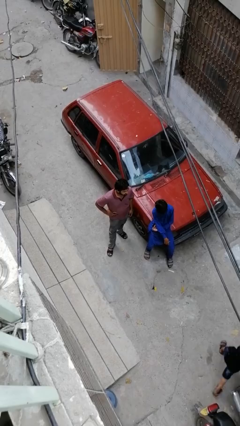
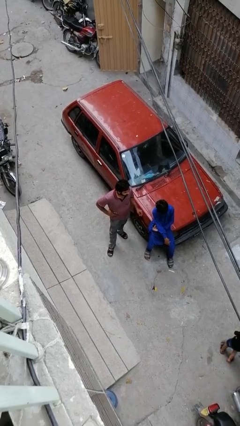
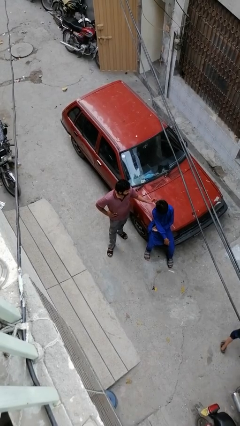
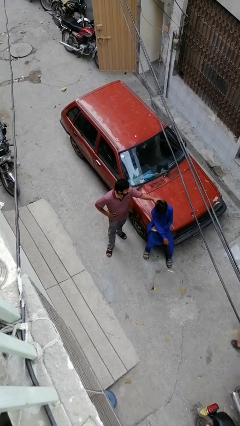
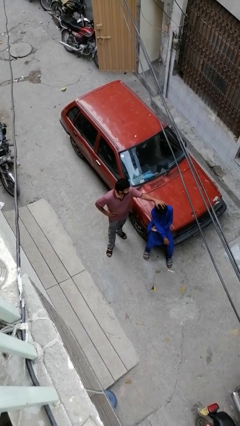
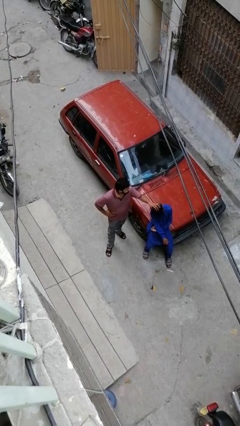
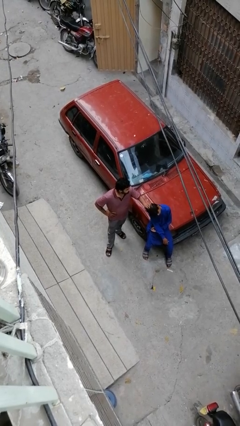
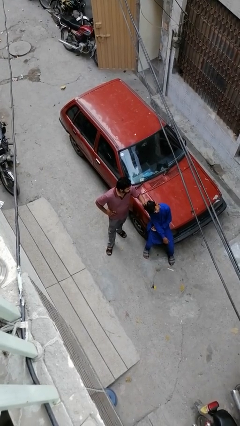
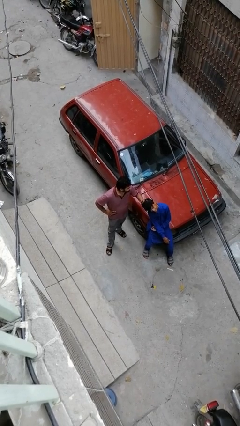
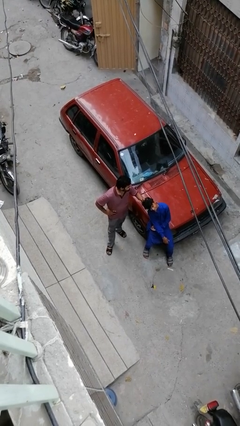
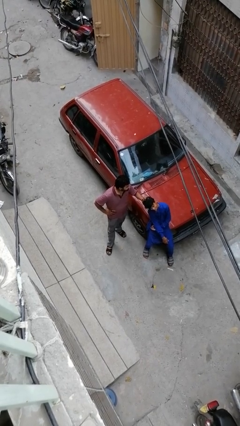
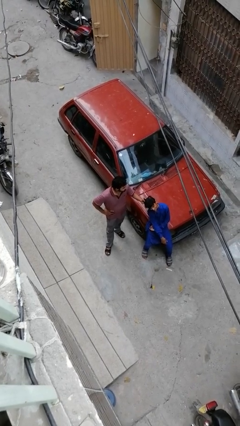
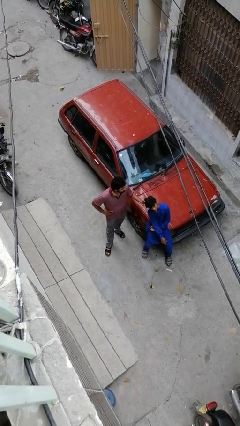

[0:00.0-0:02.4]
person grabs person by hair

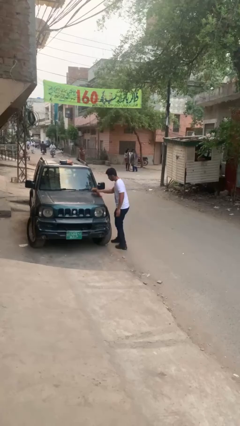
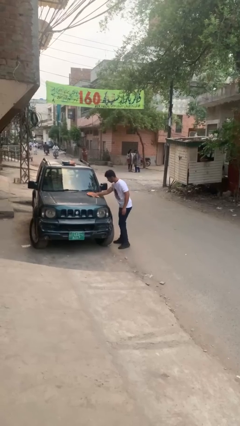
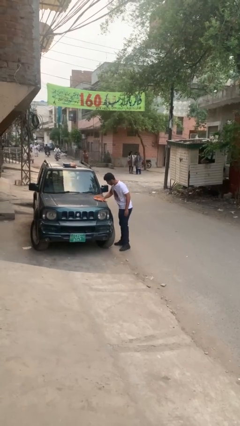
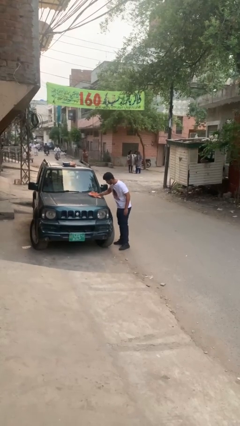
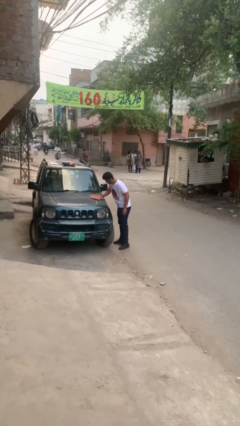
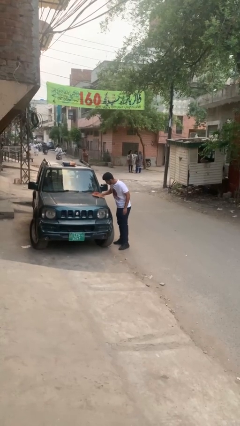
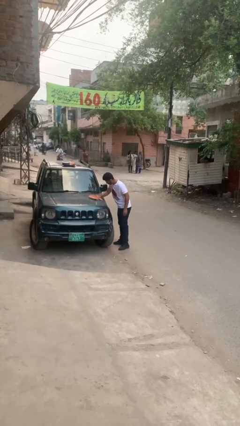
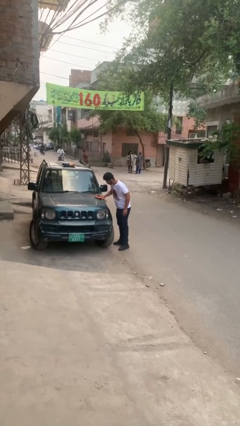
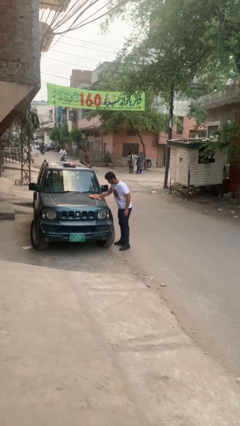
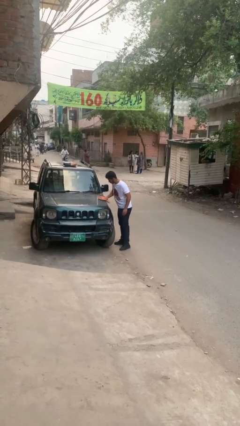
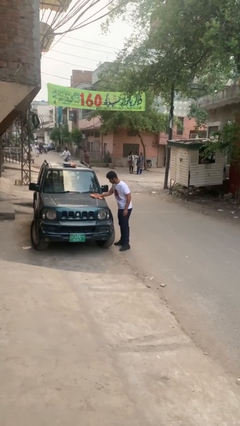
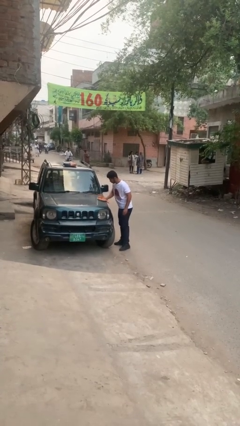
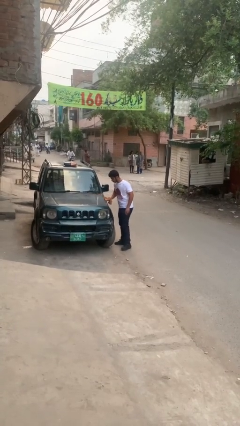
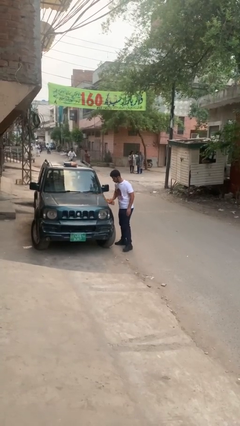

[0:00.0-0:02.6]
person polishes car with rag

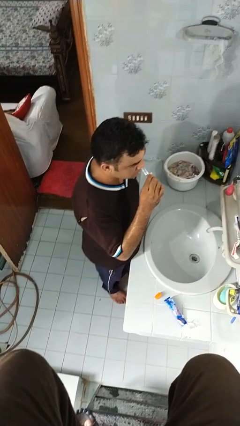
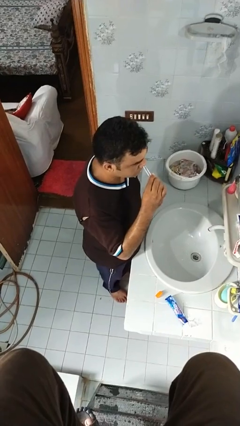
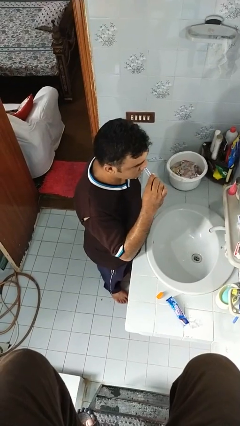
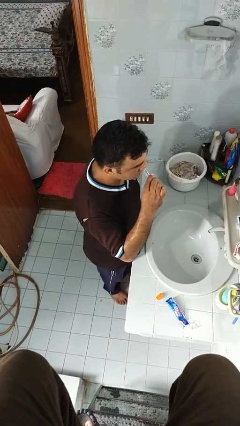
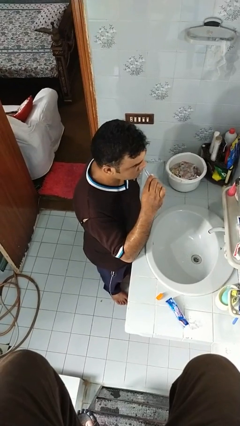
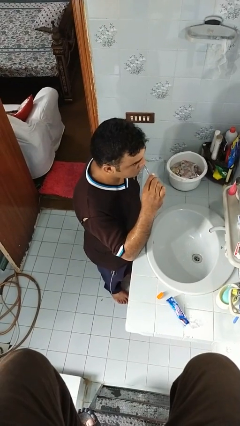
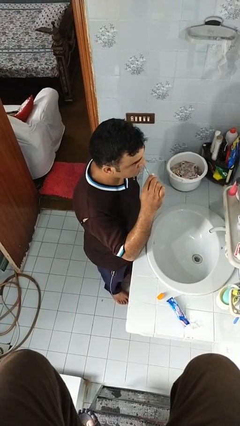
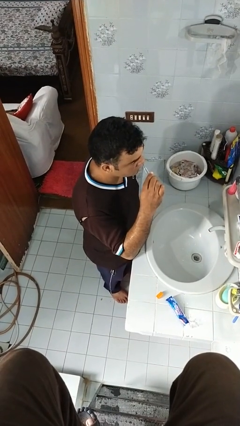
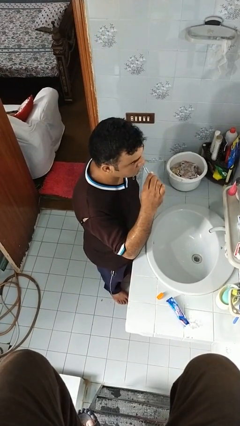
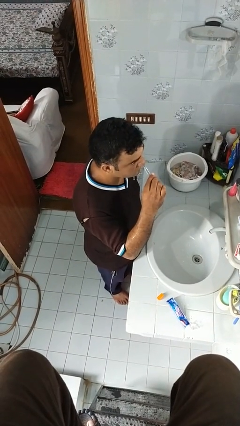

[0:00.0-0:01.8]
person brushes teeth

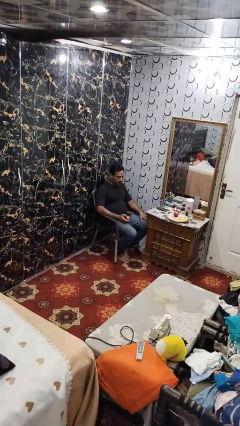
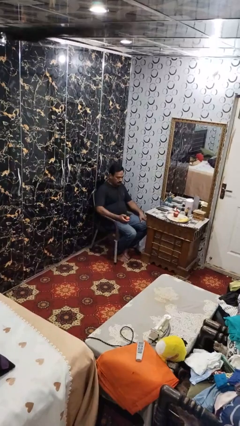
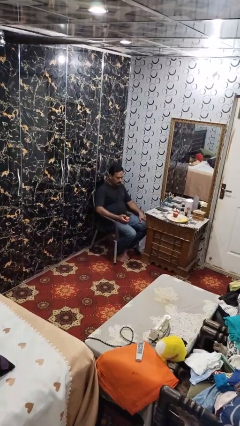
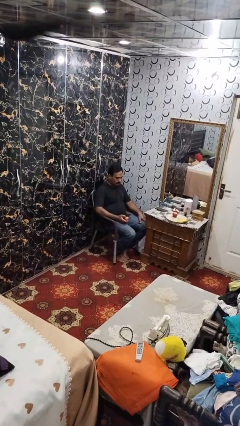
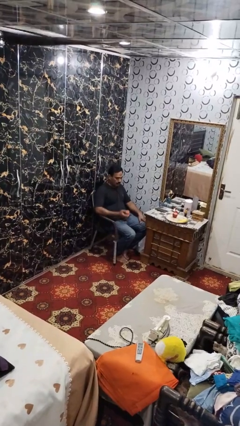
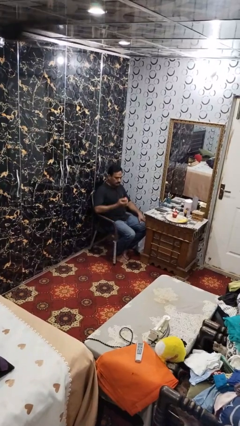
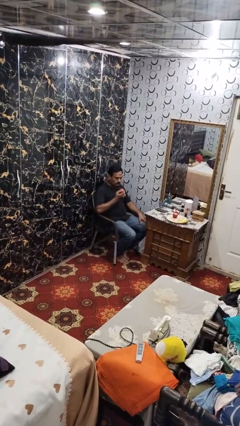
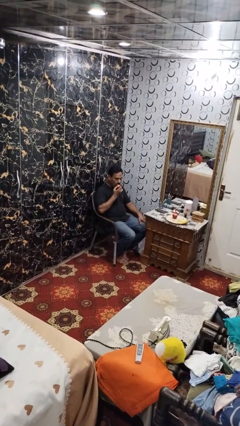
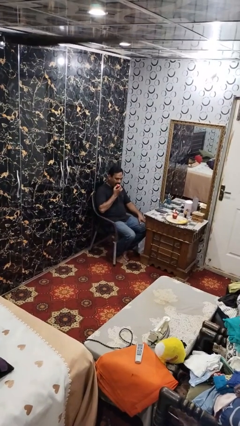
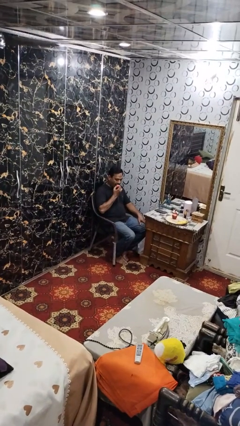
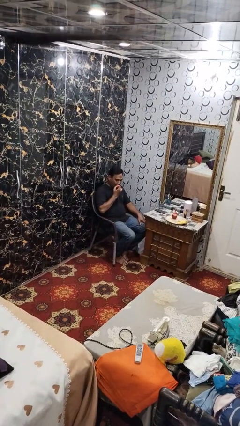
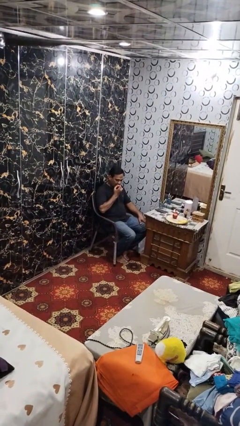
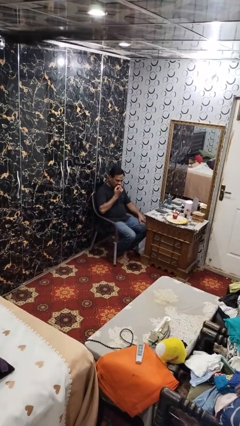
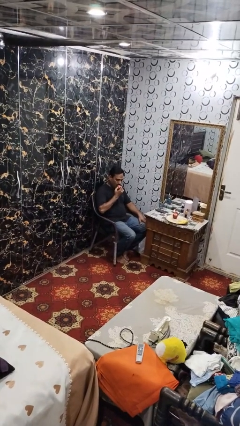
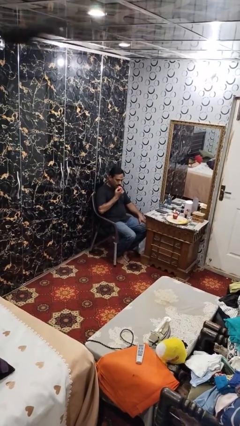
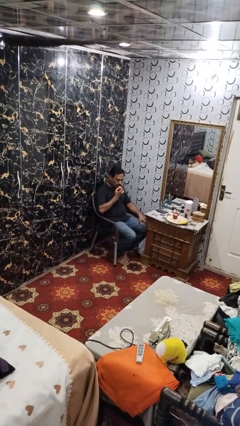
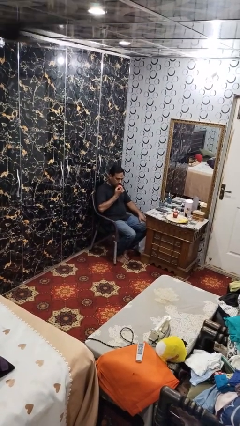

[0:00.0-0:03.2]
person eats apple

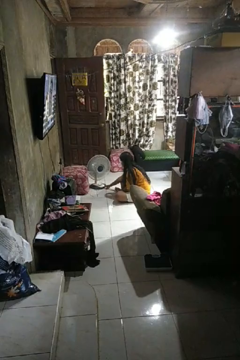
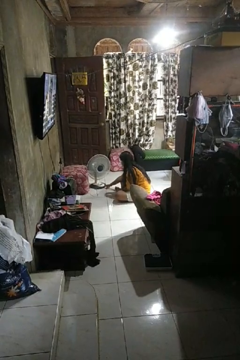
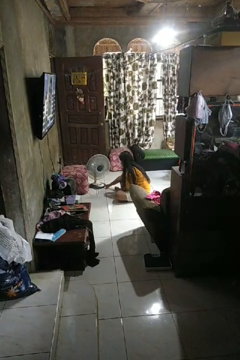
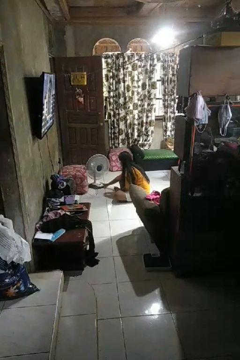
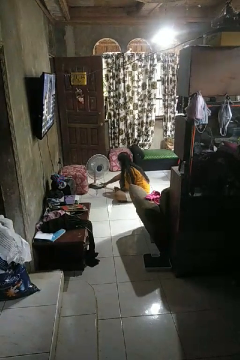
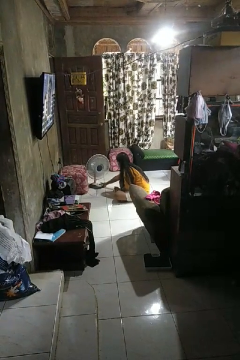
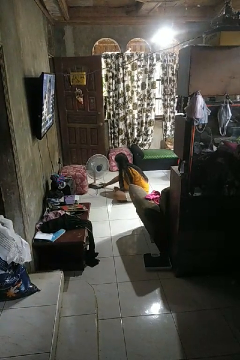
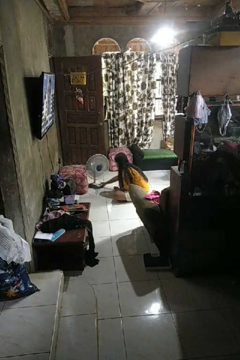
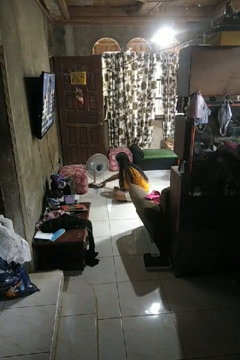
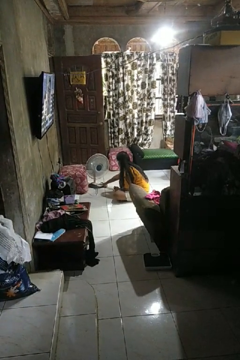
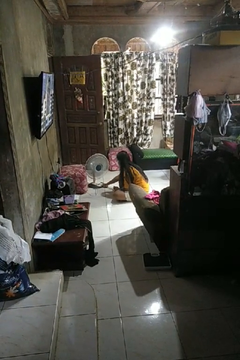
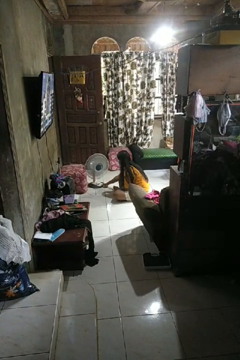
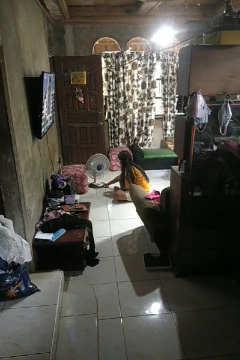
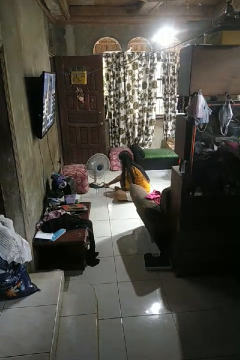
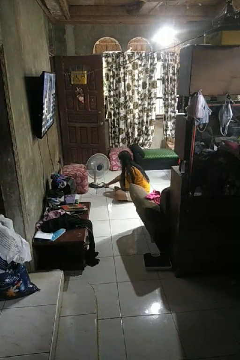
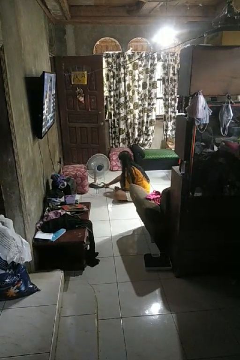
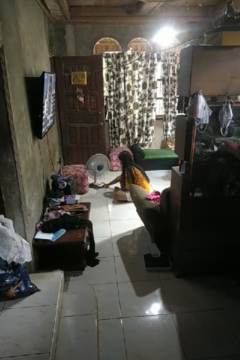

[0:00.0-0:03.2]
person turns on fan

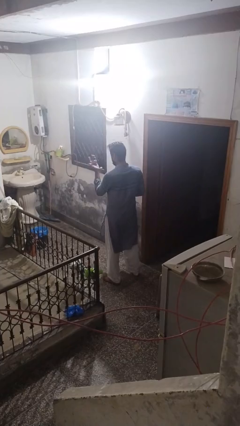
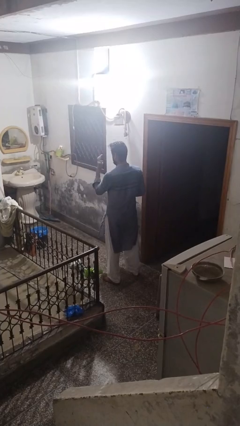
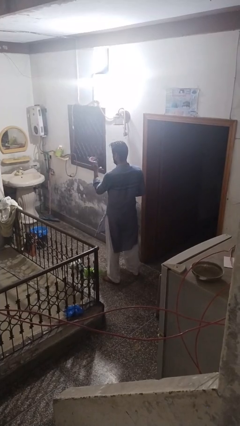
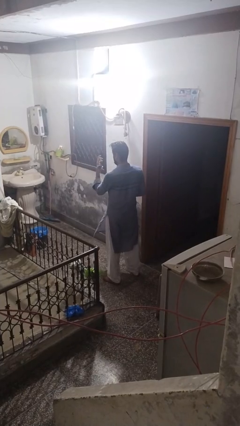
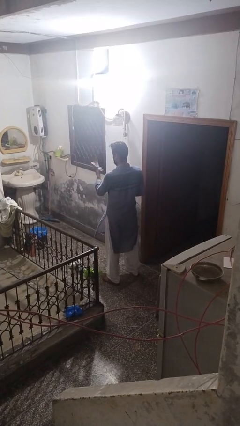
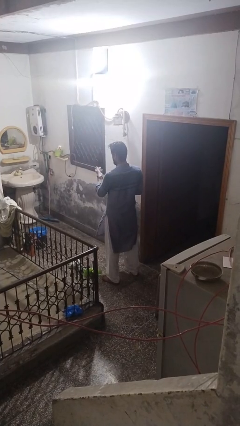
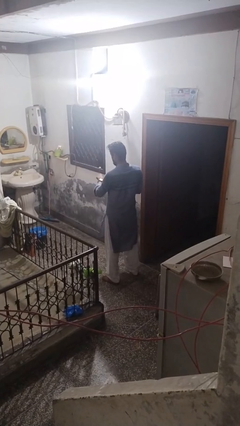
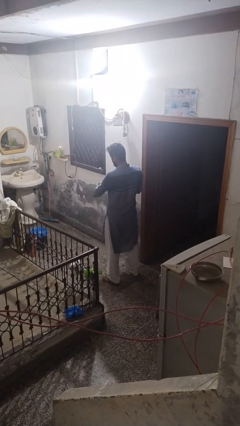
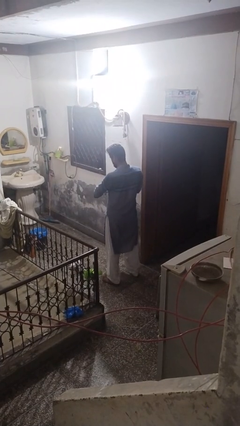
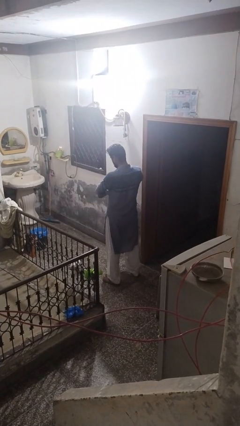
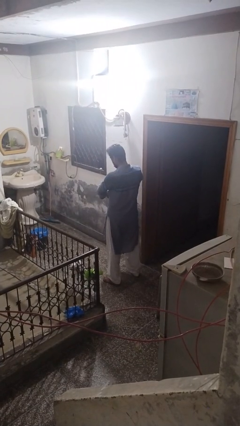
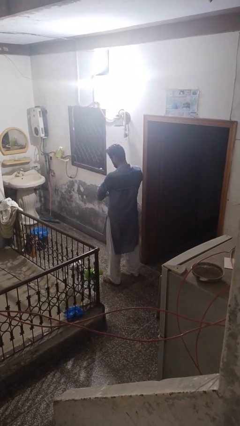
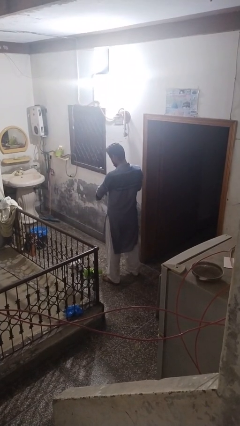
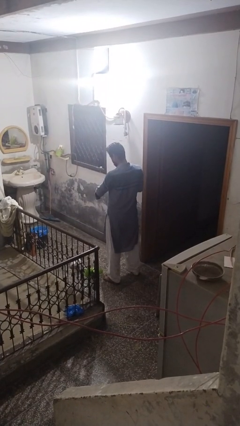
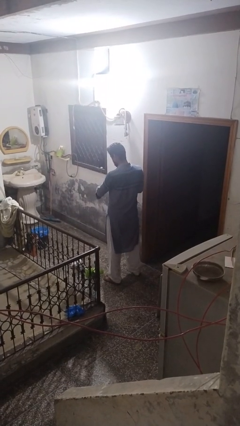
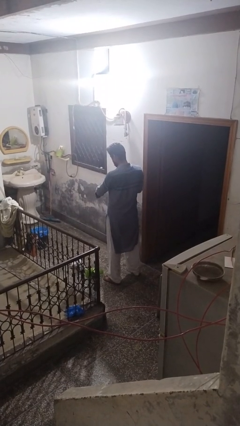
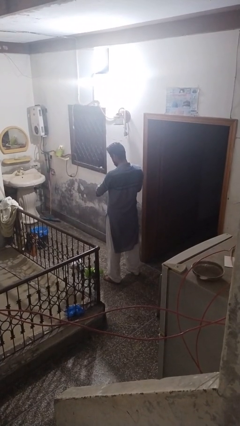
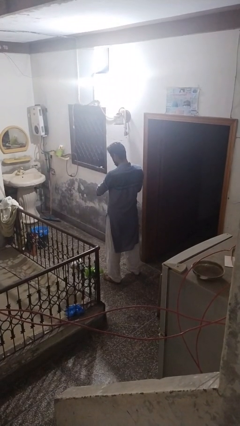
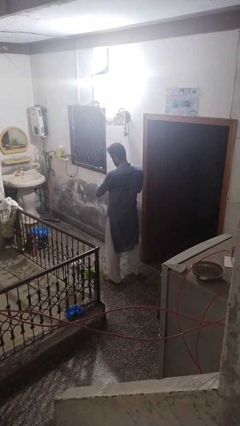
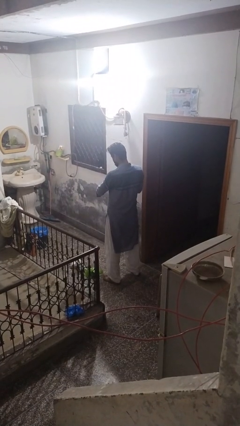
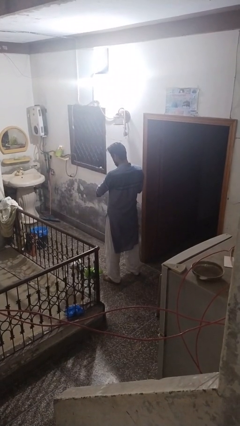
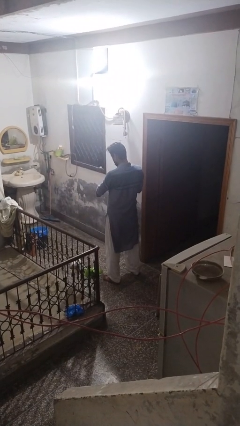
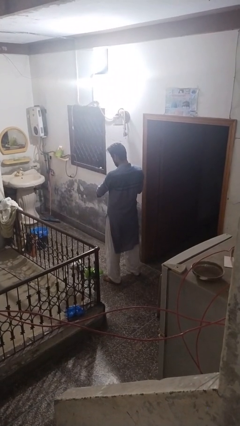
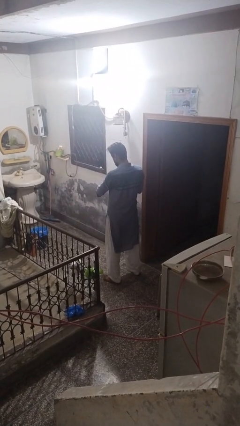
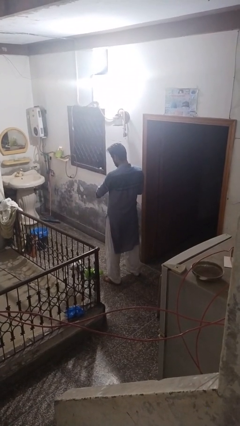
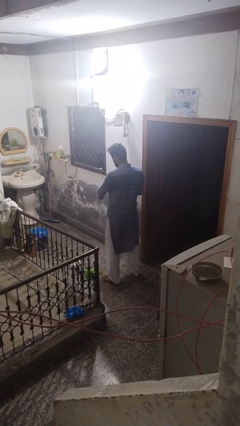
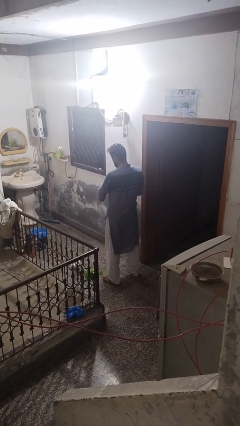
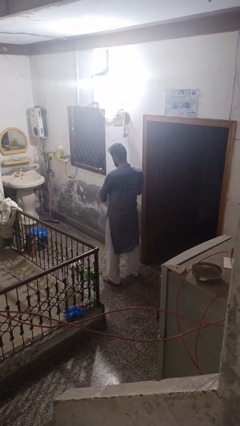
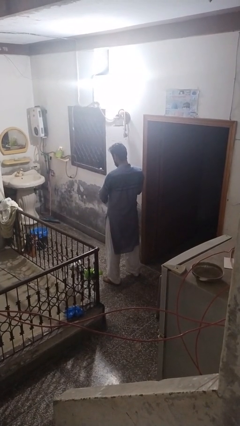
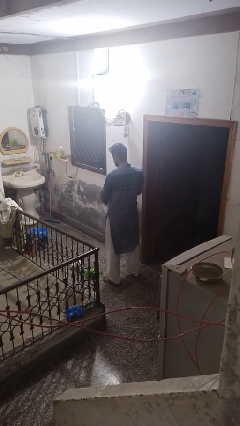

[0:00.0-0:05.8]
person dries hands with towel
